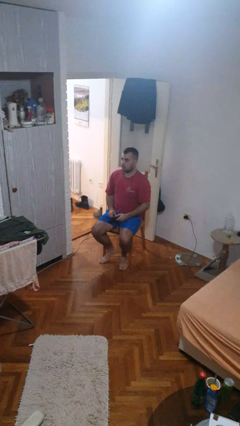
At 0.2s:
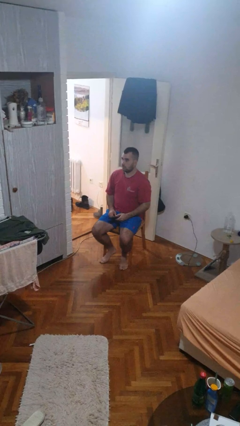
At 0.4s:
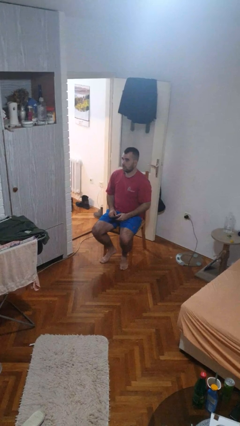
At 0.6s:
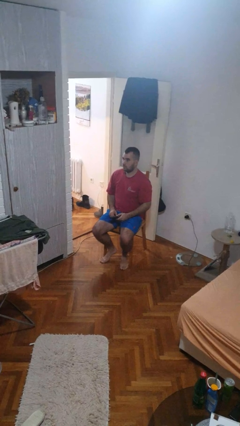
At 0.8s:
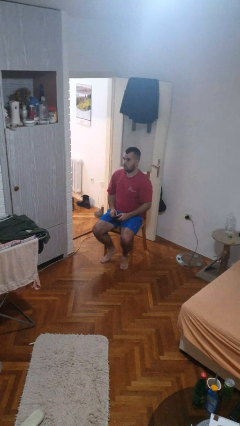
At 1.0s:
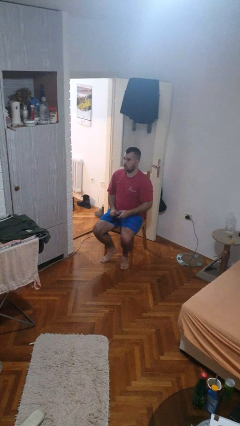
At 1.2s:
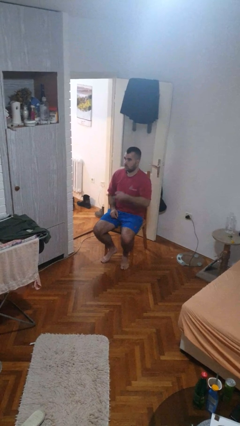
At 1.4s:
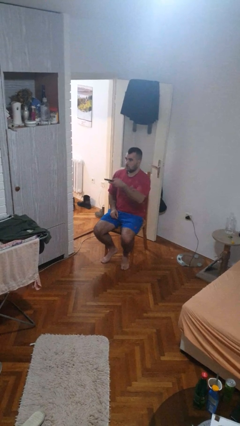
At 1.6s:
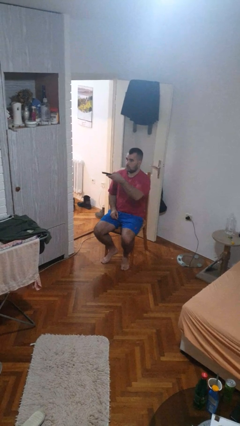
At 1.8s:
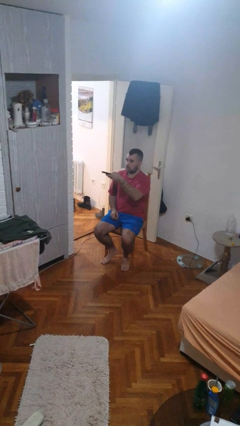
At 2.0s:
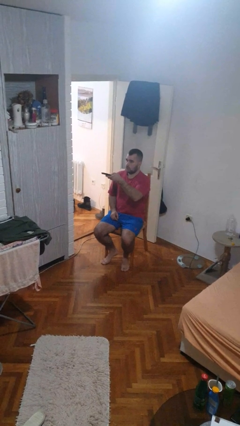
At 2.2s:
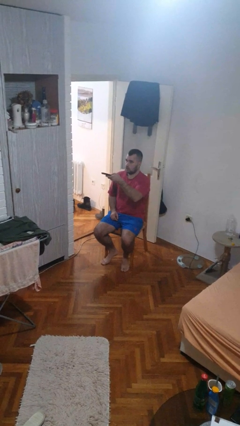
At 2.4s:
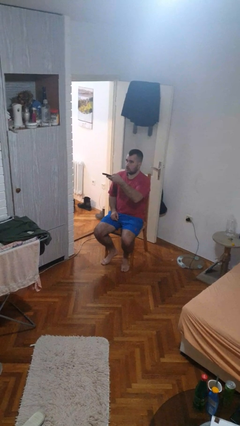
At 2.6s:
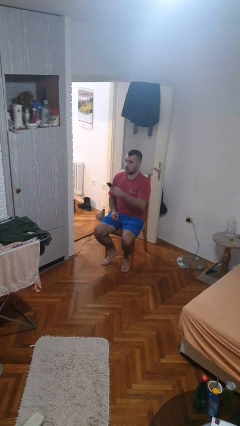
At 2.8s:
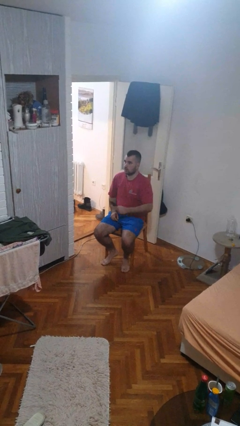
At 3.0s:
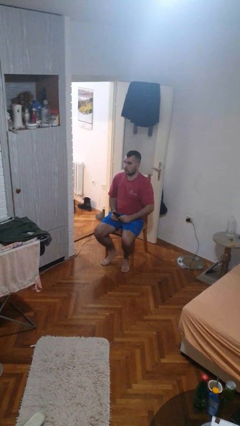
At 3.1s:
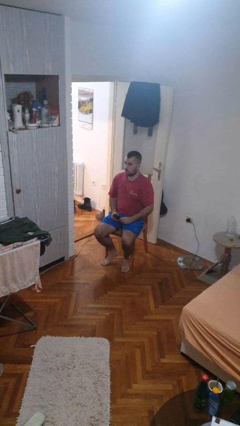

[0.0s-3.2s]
person uses television remote

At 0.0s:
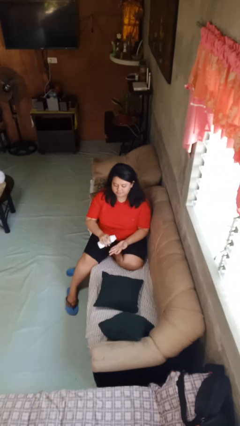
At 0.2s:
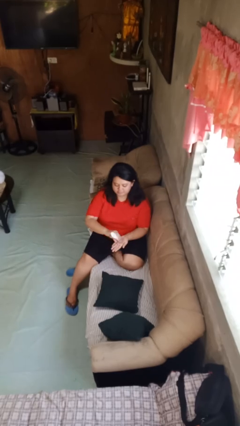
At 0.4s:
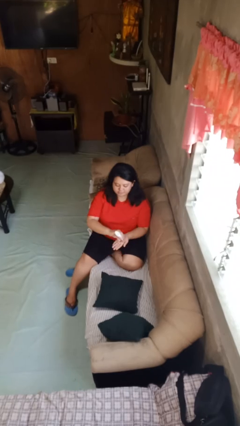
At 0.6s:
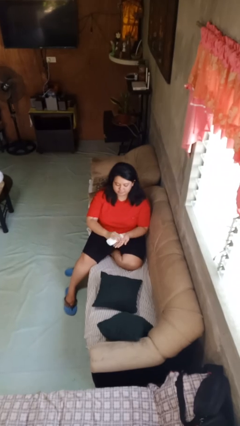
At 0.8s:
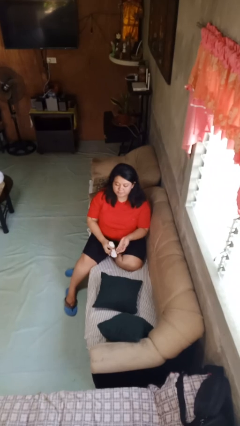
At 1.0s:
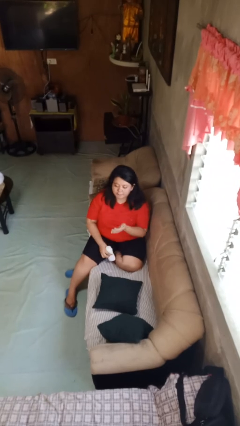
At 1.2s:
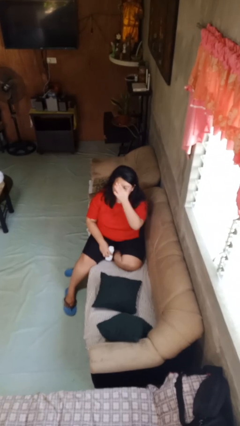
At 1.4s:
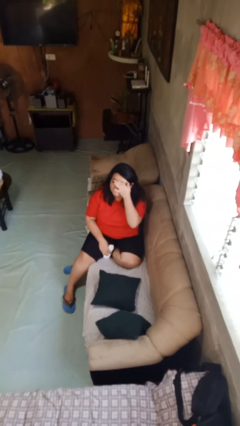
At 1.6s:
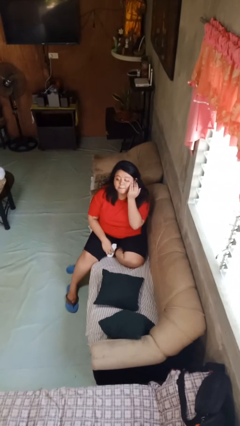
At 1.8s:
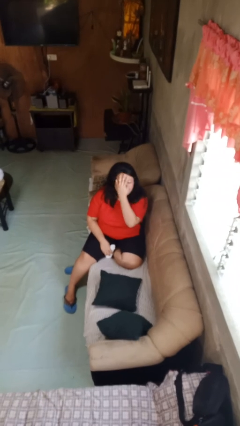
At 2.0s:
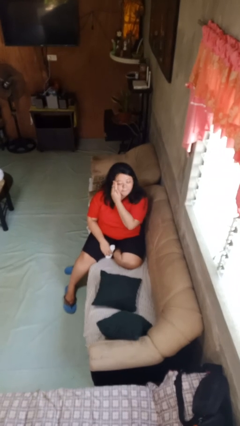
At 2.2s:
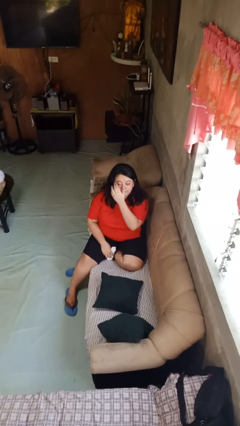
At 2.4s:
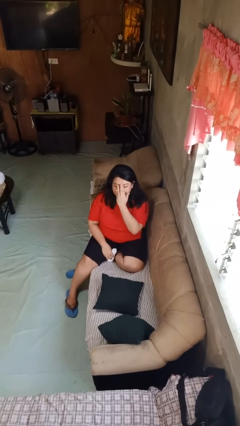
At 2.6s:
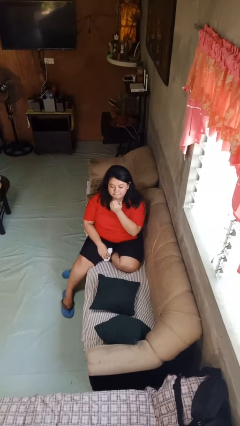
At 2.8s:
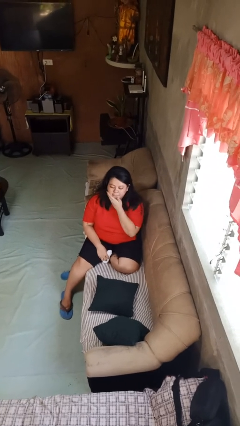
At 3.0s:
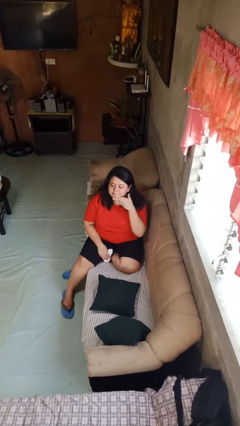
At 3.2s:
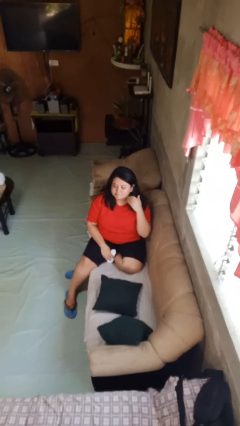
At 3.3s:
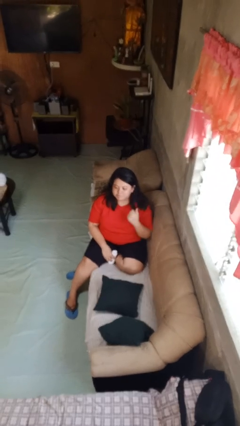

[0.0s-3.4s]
person applies facial moisturizer

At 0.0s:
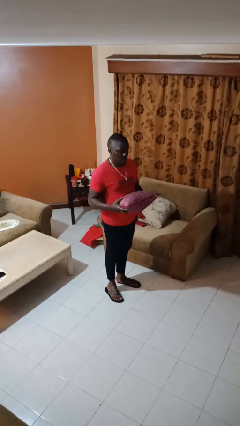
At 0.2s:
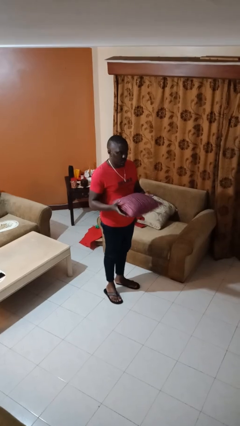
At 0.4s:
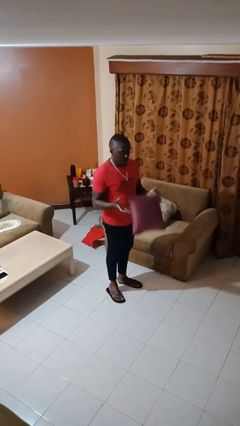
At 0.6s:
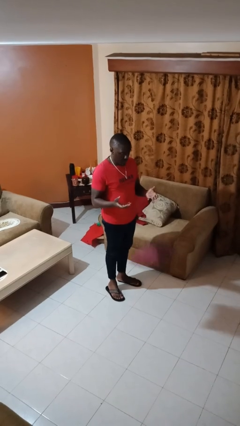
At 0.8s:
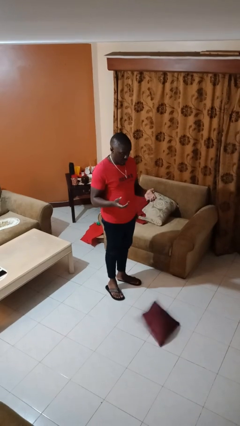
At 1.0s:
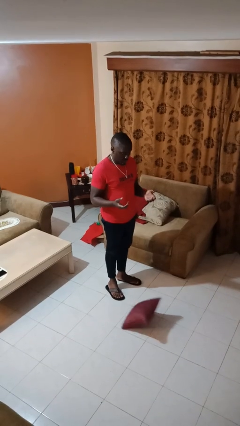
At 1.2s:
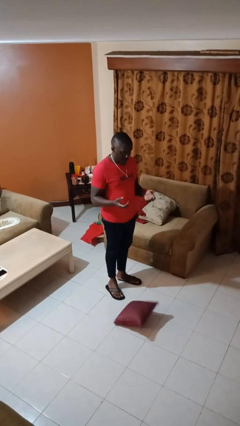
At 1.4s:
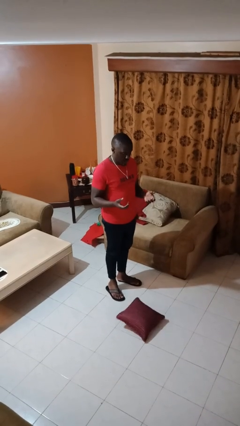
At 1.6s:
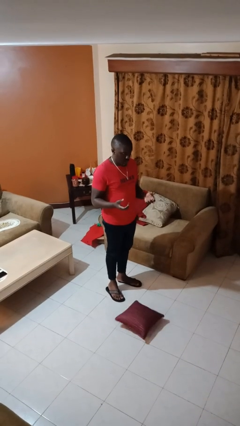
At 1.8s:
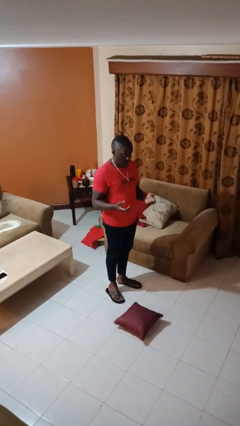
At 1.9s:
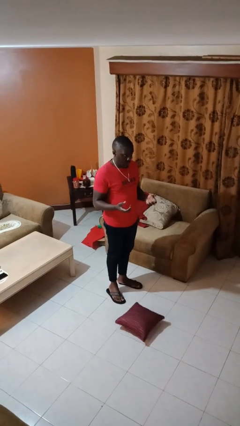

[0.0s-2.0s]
person drops object

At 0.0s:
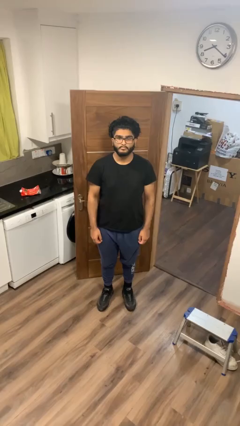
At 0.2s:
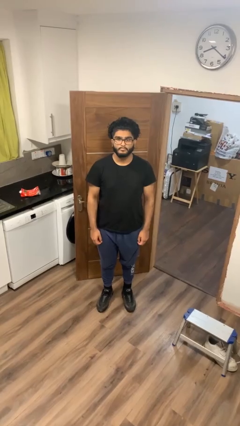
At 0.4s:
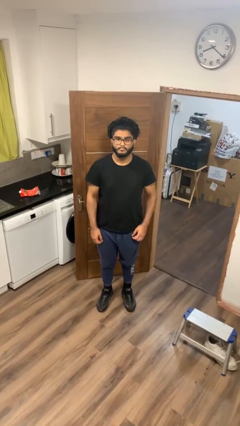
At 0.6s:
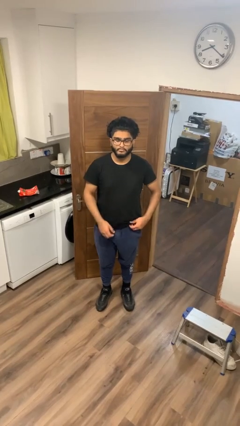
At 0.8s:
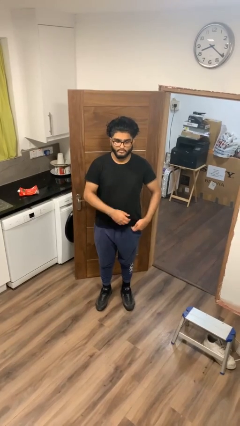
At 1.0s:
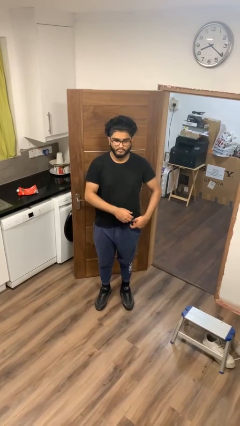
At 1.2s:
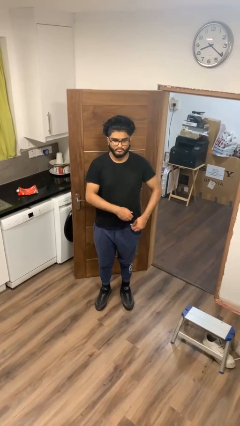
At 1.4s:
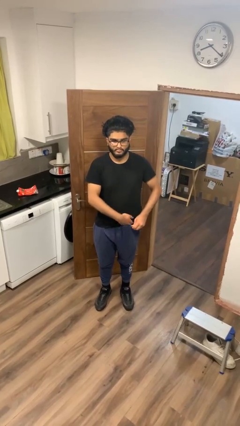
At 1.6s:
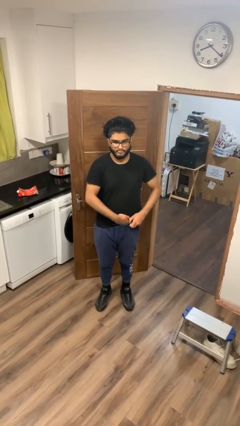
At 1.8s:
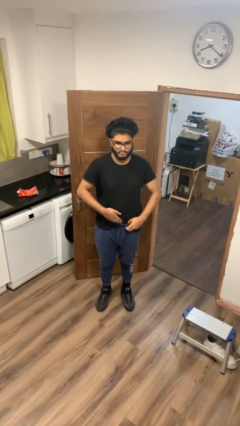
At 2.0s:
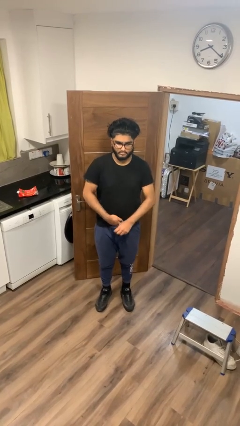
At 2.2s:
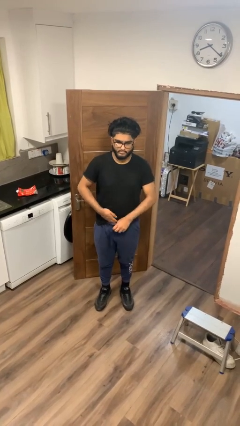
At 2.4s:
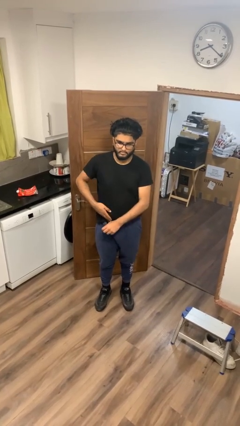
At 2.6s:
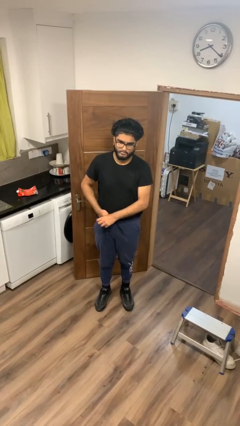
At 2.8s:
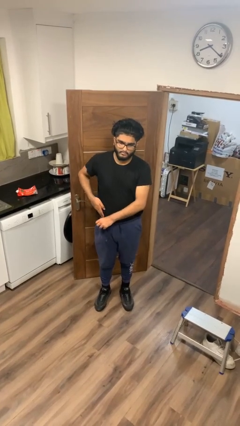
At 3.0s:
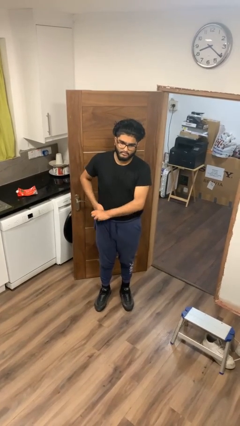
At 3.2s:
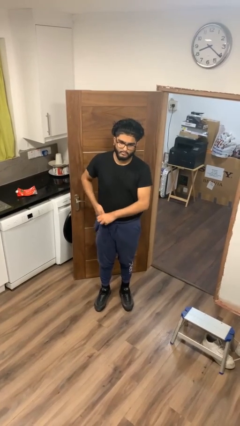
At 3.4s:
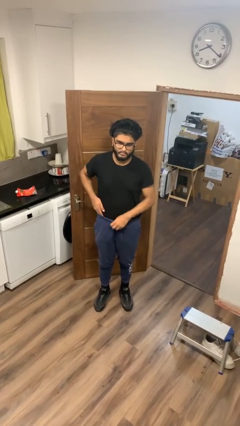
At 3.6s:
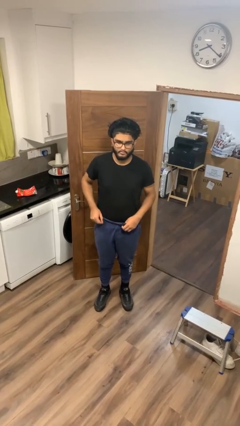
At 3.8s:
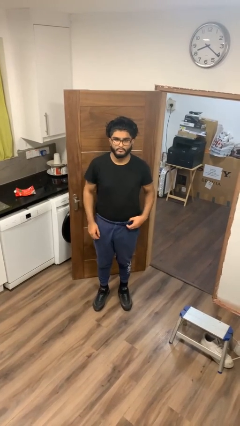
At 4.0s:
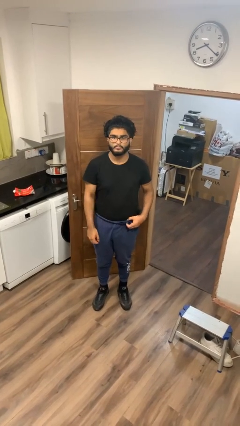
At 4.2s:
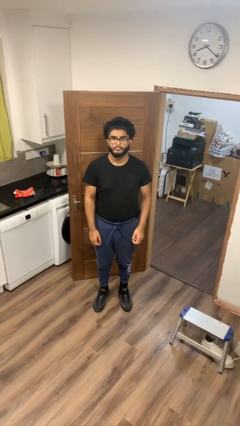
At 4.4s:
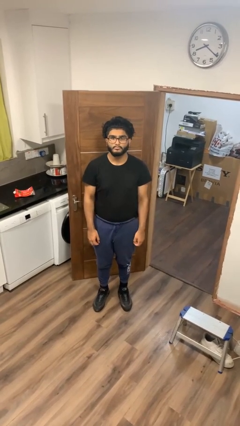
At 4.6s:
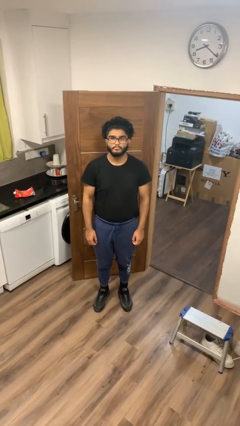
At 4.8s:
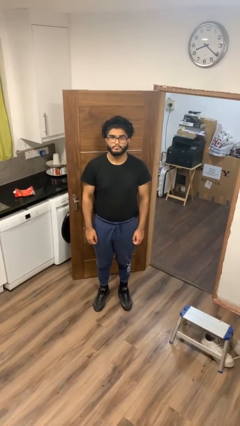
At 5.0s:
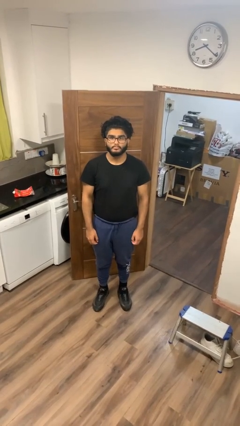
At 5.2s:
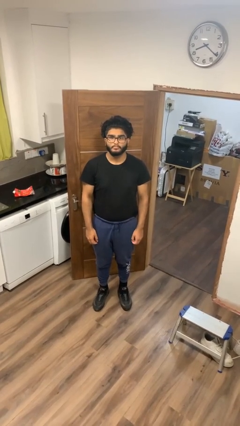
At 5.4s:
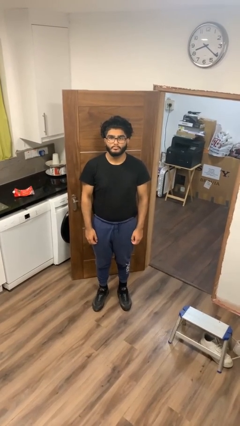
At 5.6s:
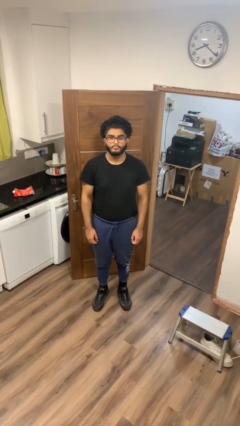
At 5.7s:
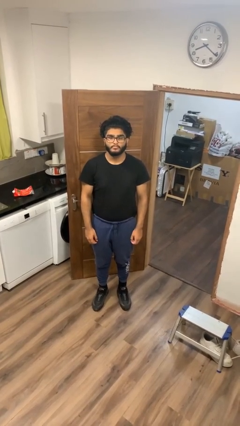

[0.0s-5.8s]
person tucks in shirt

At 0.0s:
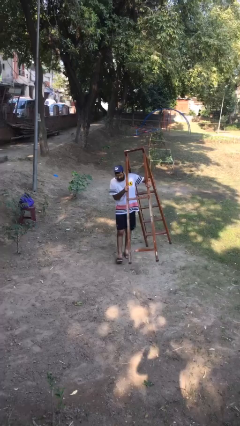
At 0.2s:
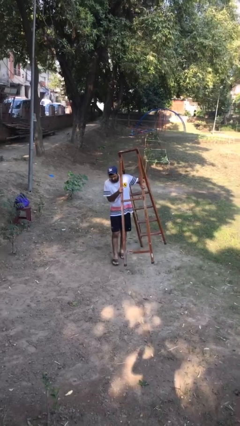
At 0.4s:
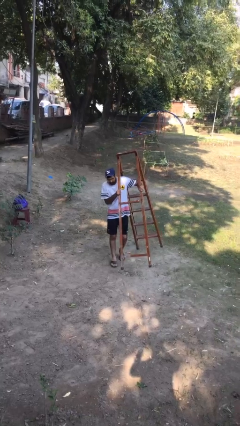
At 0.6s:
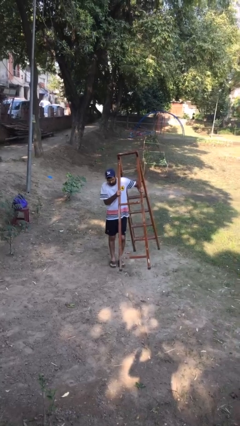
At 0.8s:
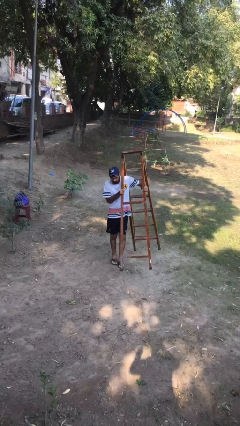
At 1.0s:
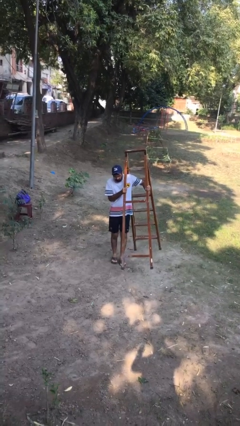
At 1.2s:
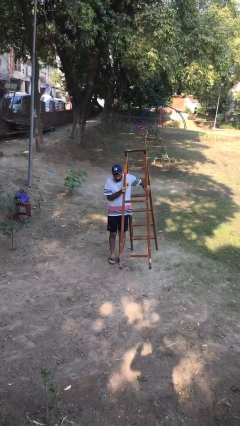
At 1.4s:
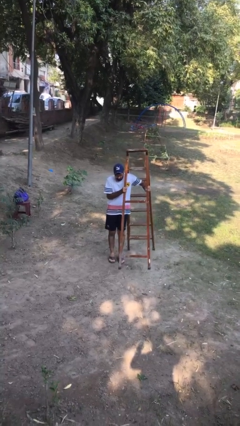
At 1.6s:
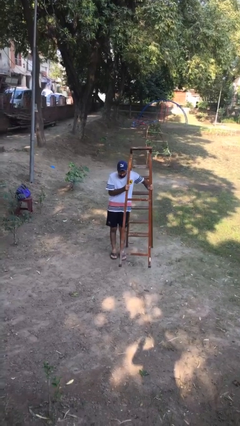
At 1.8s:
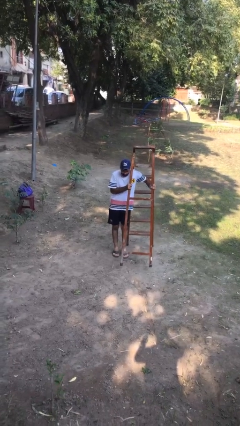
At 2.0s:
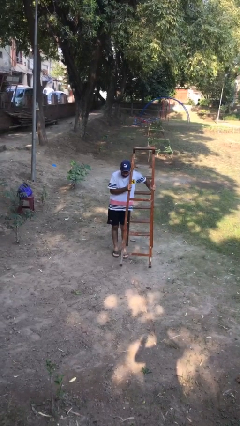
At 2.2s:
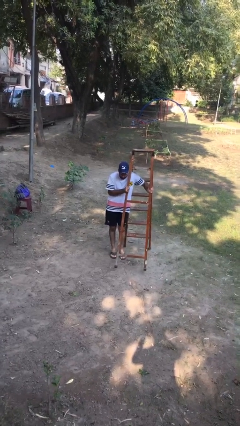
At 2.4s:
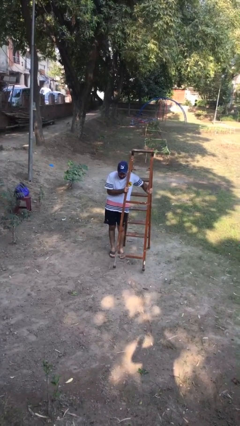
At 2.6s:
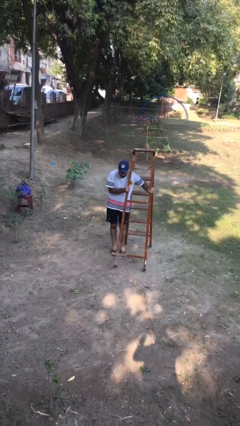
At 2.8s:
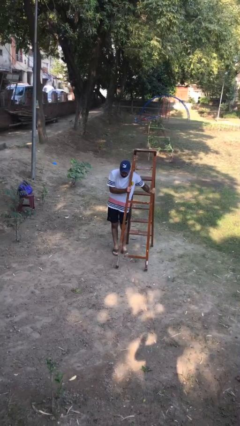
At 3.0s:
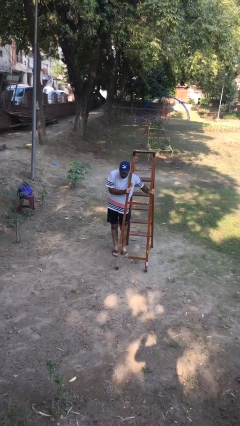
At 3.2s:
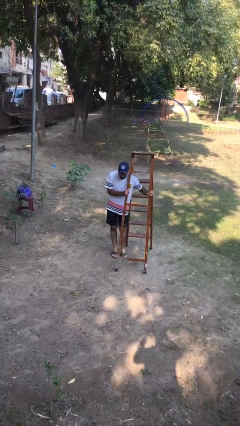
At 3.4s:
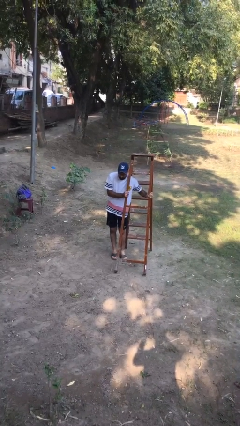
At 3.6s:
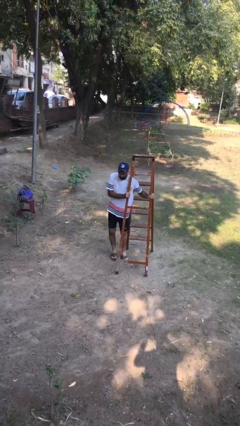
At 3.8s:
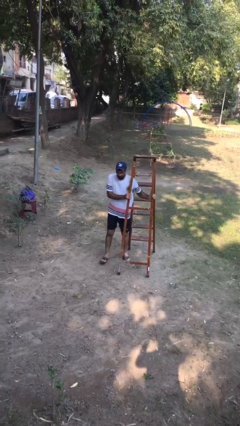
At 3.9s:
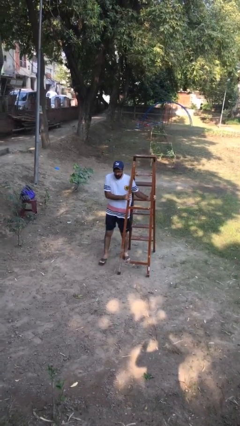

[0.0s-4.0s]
person puts down object on floor
